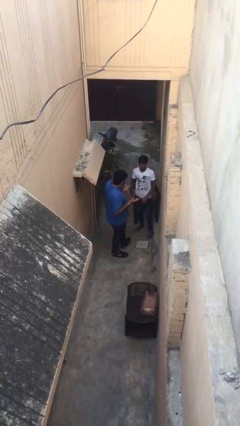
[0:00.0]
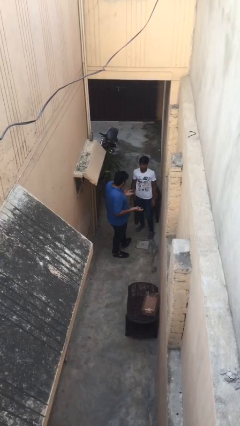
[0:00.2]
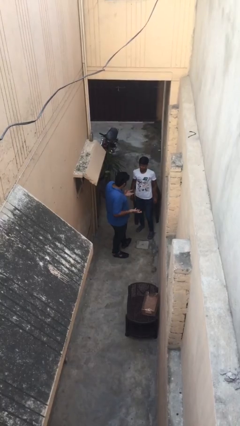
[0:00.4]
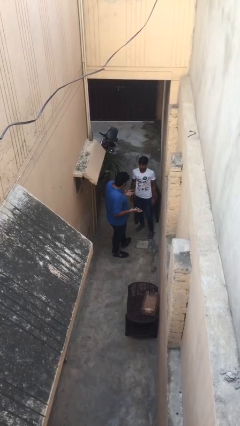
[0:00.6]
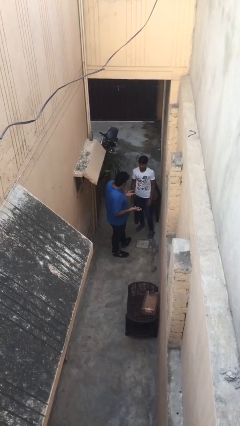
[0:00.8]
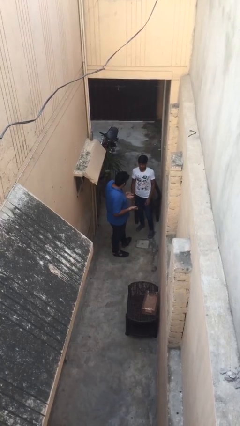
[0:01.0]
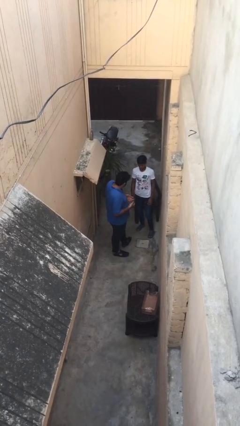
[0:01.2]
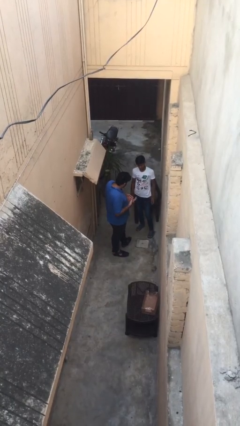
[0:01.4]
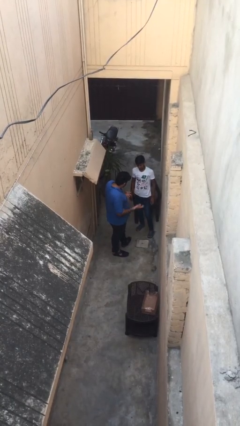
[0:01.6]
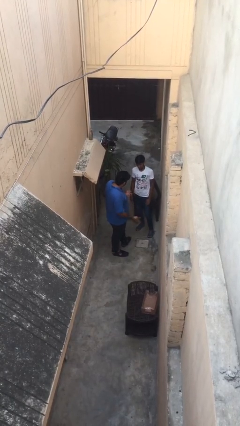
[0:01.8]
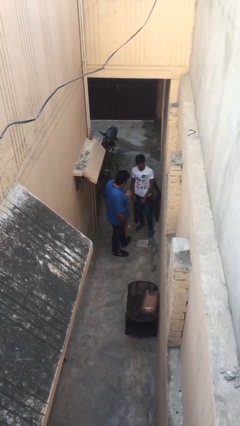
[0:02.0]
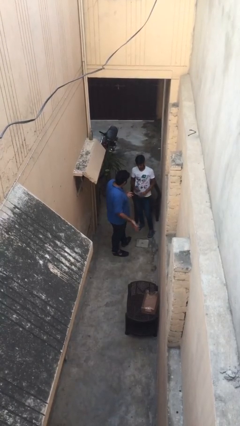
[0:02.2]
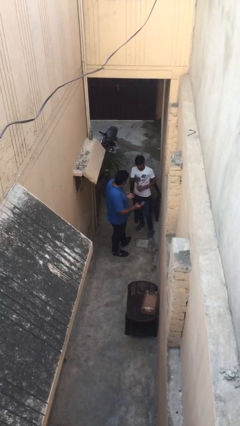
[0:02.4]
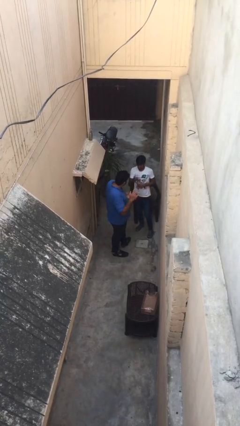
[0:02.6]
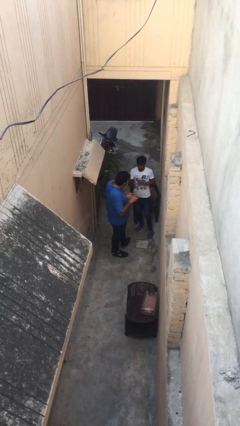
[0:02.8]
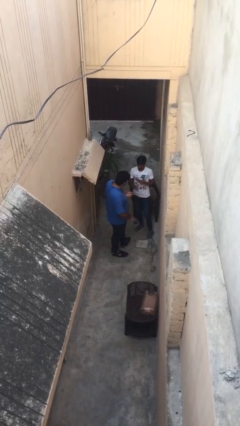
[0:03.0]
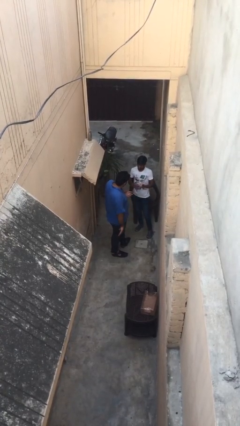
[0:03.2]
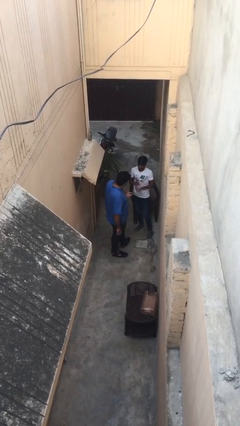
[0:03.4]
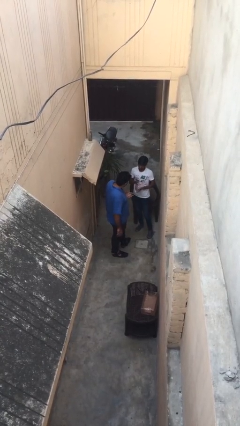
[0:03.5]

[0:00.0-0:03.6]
person talks to person

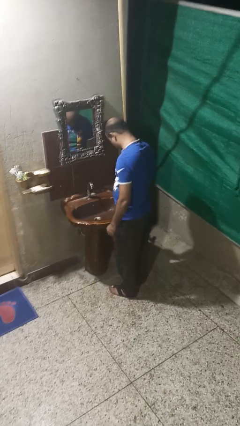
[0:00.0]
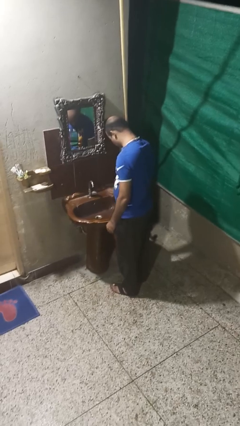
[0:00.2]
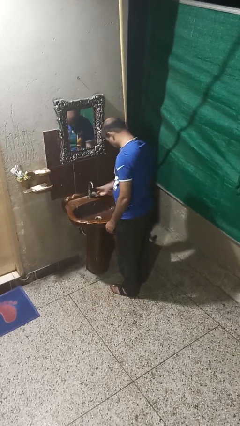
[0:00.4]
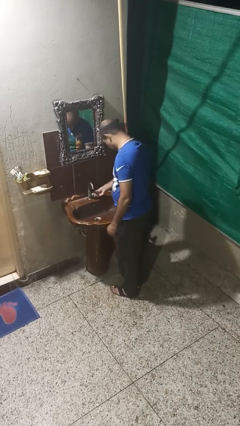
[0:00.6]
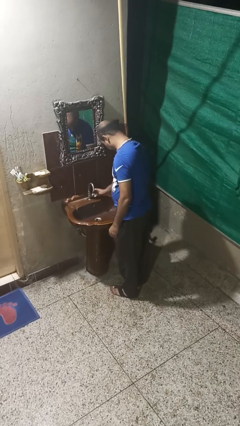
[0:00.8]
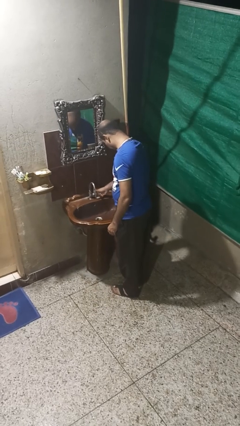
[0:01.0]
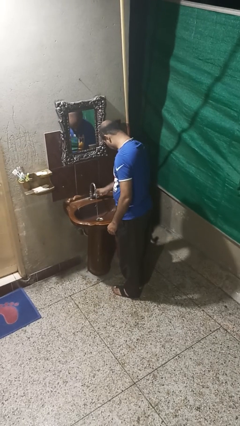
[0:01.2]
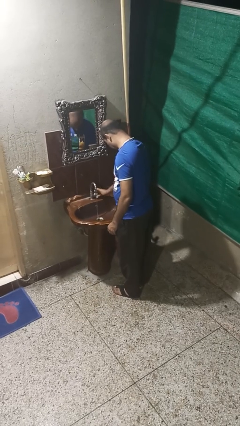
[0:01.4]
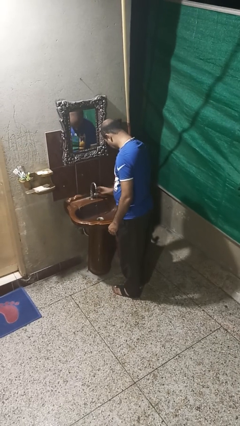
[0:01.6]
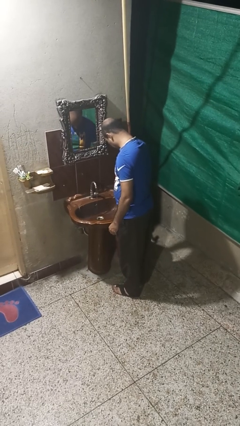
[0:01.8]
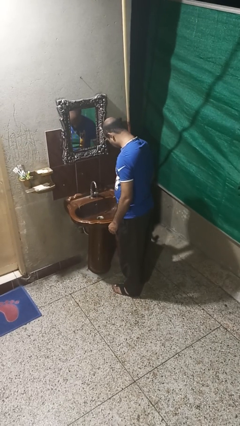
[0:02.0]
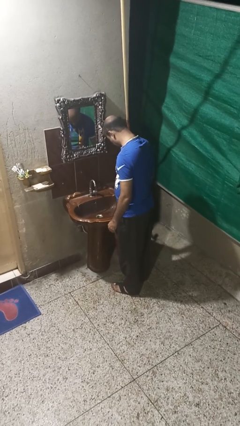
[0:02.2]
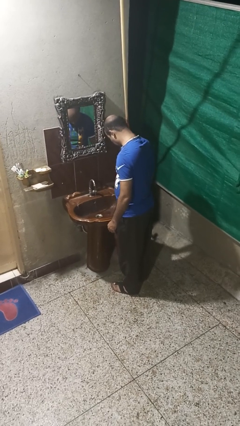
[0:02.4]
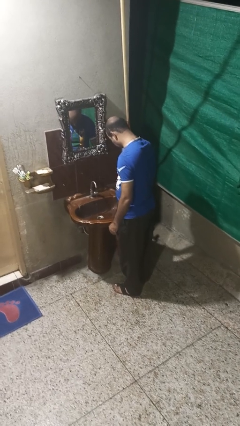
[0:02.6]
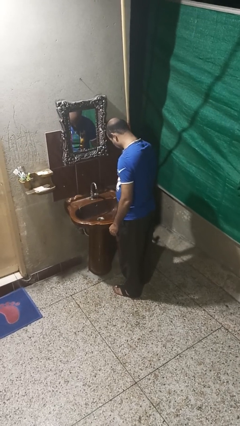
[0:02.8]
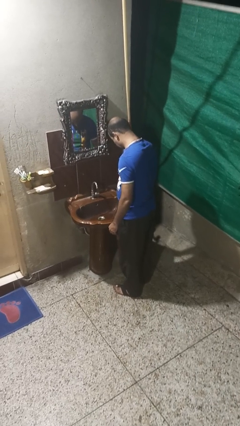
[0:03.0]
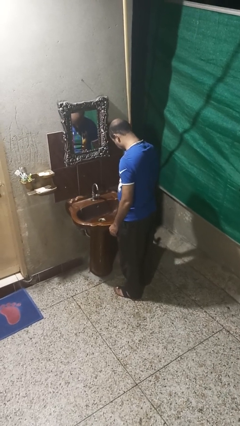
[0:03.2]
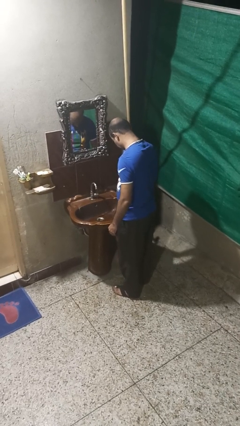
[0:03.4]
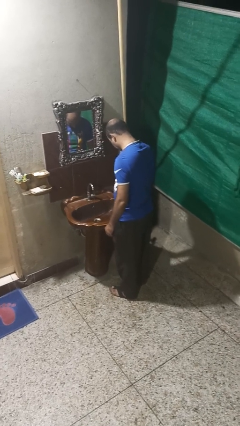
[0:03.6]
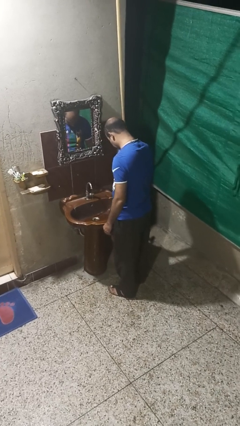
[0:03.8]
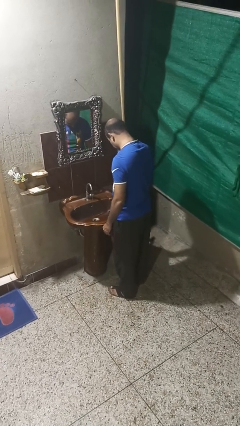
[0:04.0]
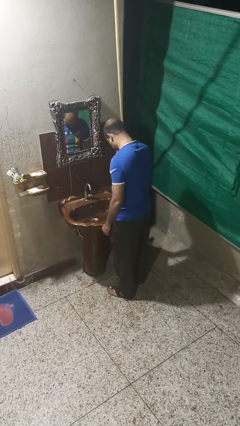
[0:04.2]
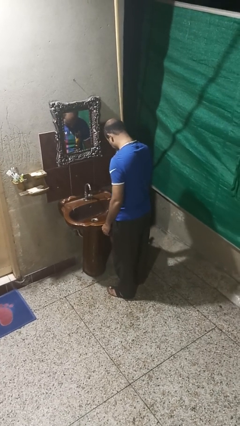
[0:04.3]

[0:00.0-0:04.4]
person turns on faucet

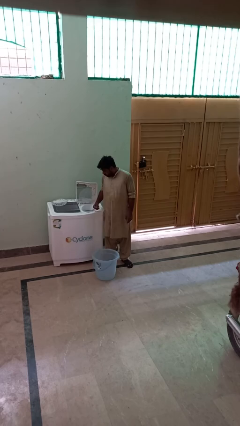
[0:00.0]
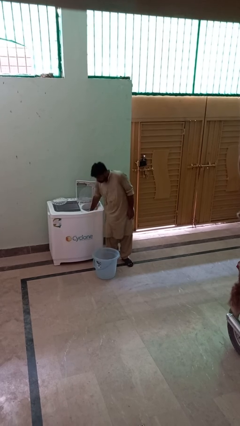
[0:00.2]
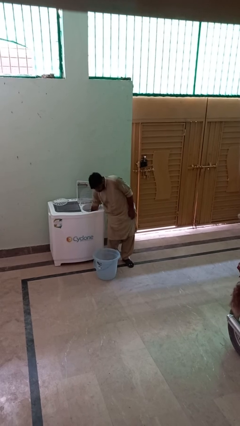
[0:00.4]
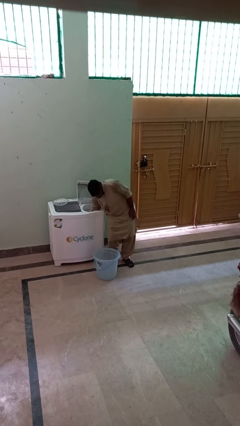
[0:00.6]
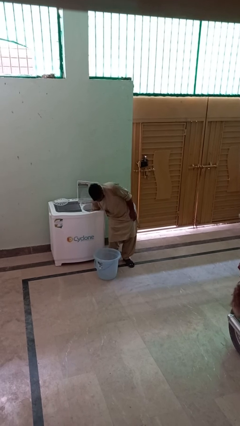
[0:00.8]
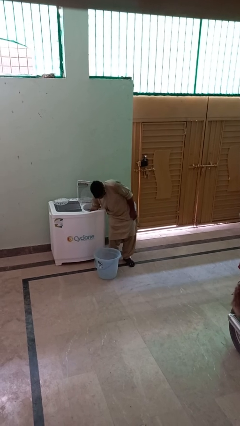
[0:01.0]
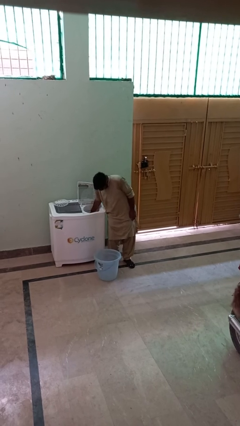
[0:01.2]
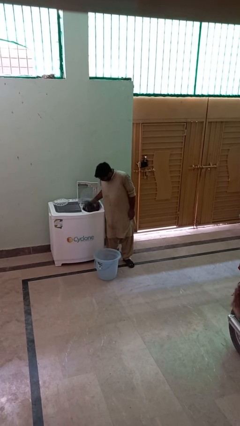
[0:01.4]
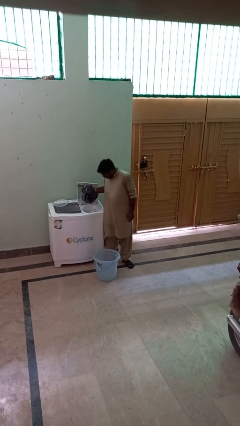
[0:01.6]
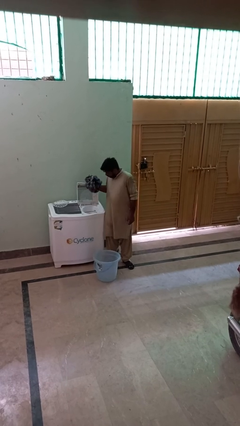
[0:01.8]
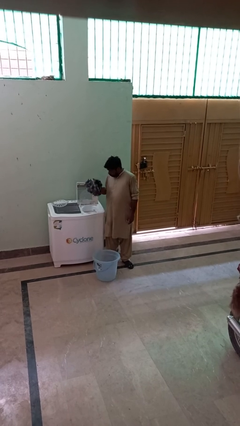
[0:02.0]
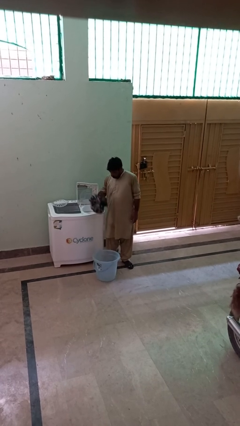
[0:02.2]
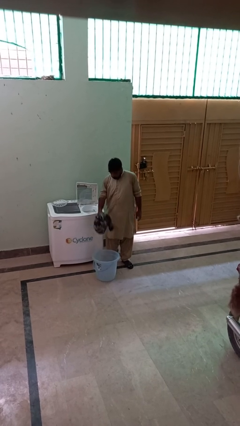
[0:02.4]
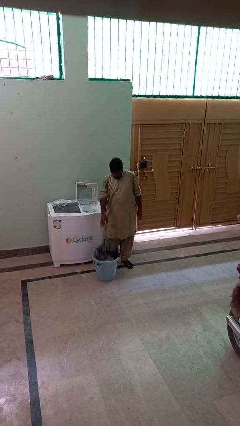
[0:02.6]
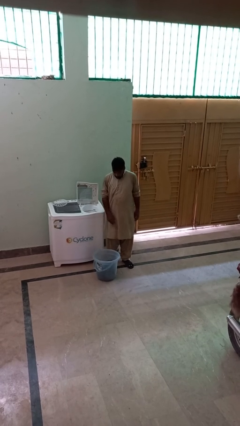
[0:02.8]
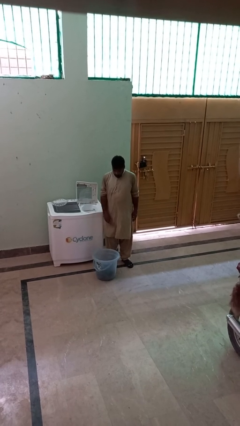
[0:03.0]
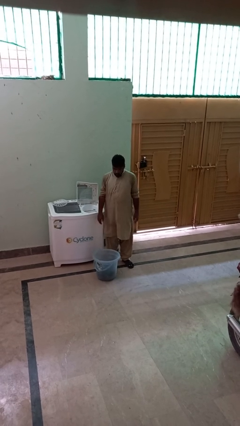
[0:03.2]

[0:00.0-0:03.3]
person unloads dryer

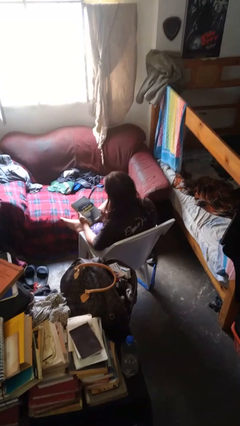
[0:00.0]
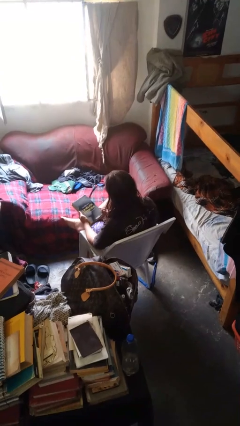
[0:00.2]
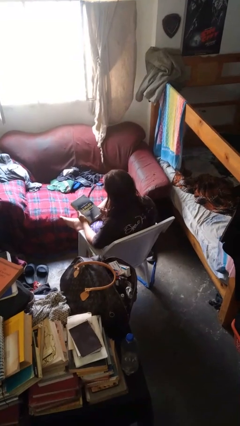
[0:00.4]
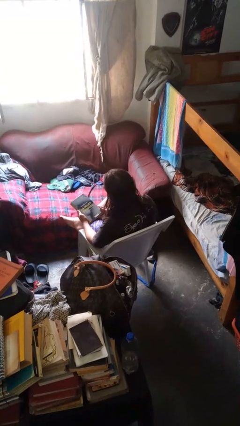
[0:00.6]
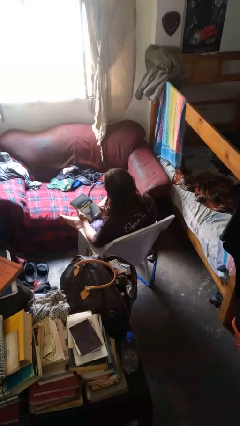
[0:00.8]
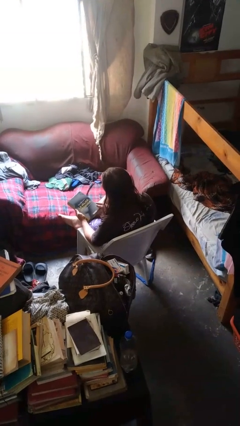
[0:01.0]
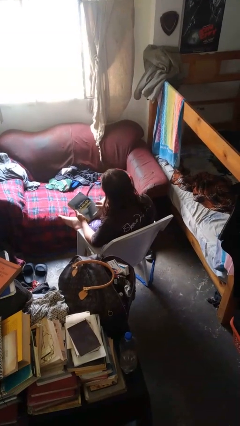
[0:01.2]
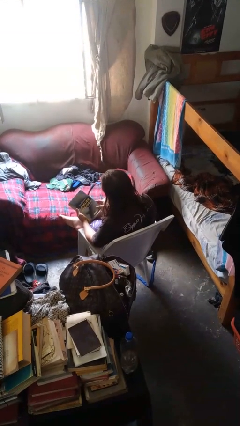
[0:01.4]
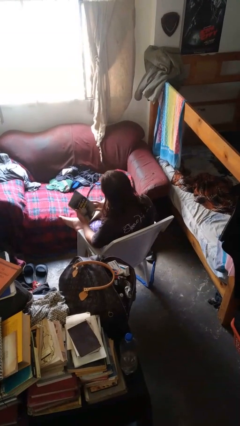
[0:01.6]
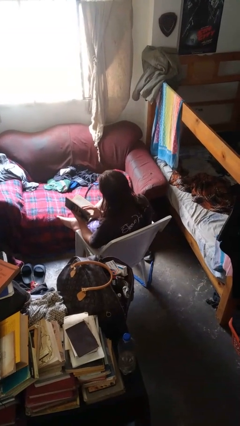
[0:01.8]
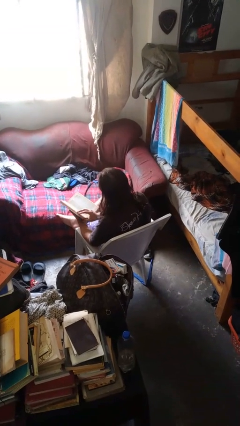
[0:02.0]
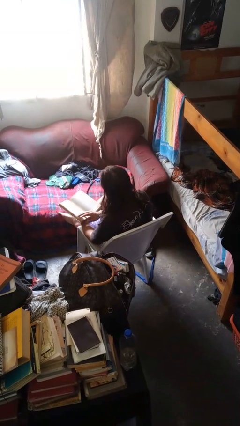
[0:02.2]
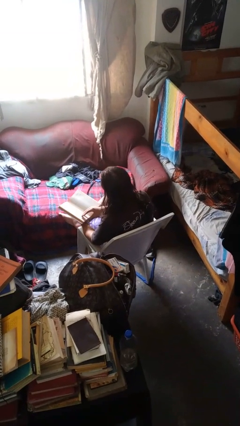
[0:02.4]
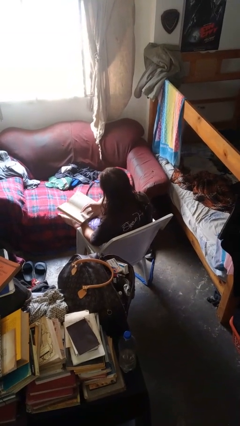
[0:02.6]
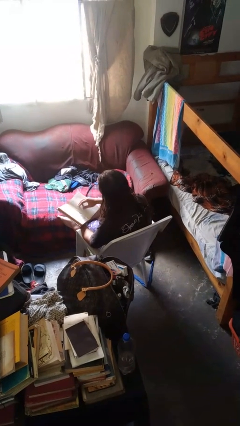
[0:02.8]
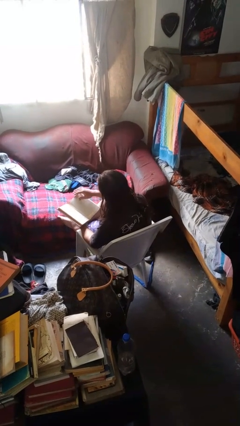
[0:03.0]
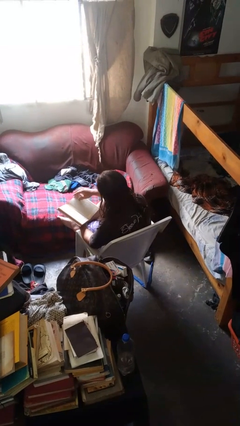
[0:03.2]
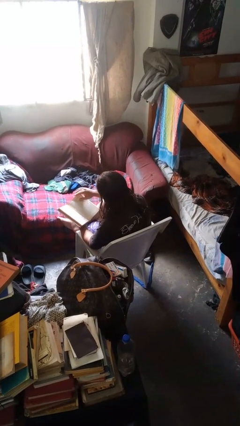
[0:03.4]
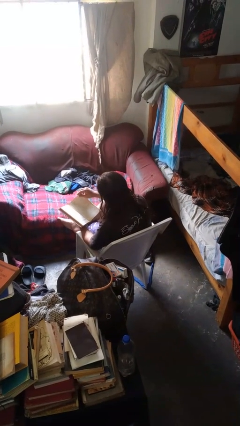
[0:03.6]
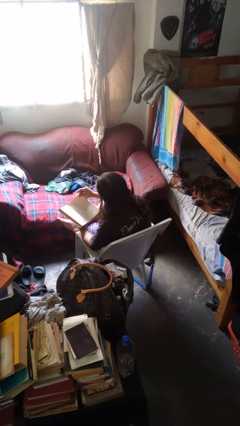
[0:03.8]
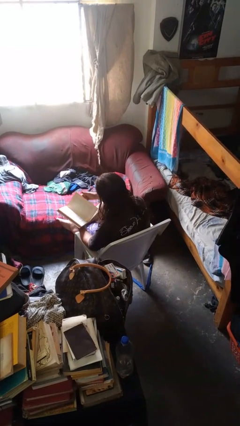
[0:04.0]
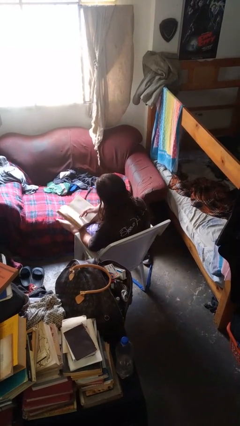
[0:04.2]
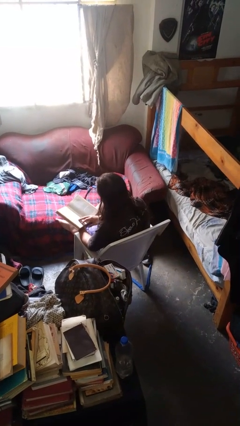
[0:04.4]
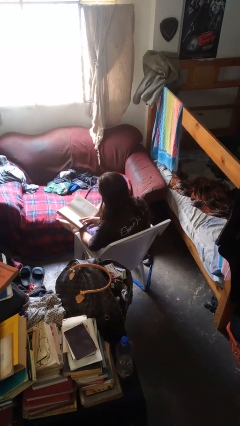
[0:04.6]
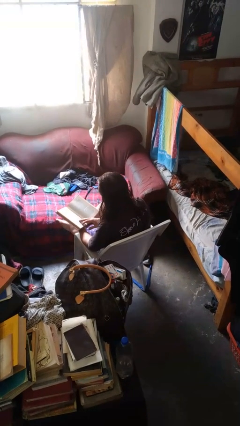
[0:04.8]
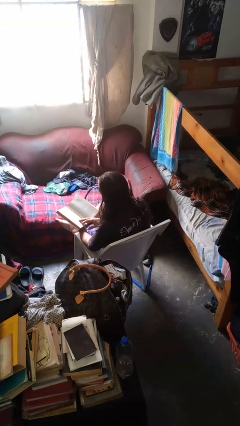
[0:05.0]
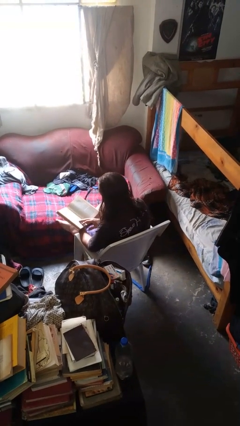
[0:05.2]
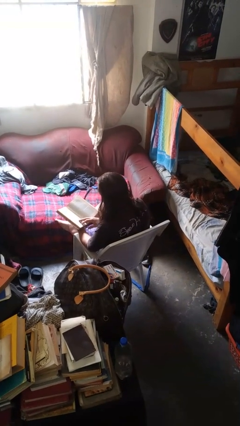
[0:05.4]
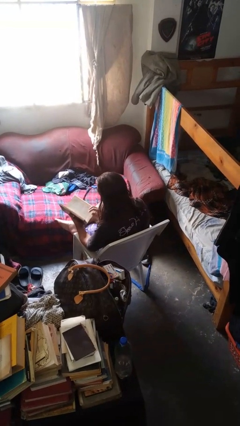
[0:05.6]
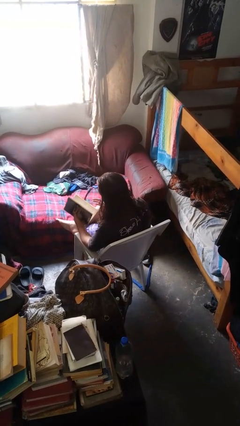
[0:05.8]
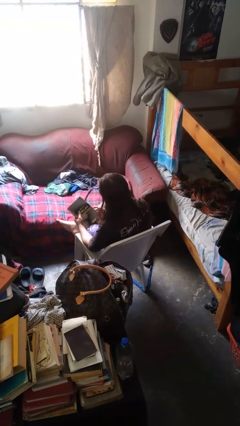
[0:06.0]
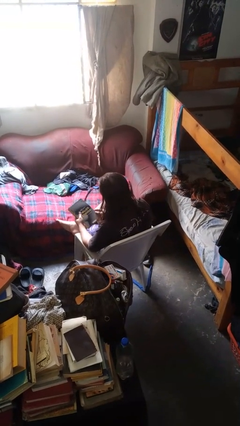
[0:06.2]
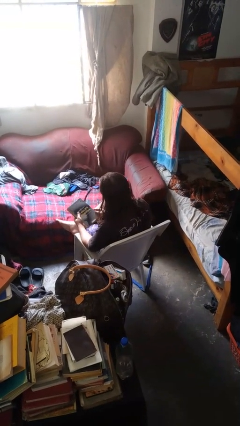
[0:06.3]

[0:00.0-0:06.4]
person reads book
